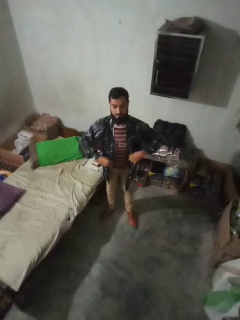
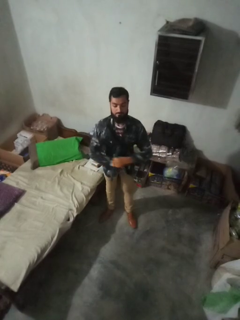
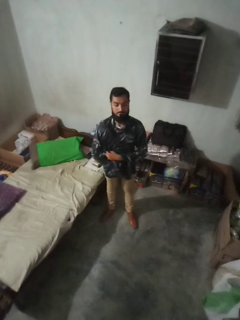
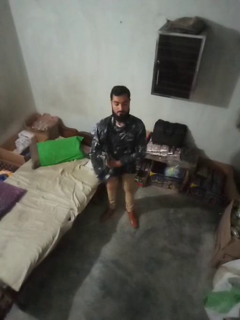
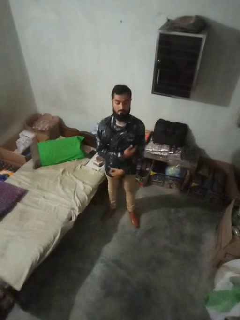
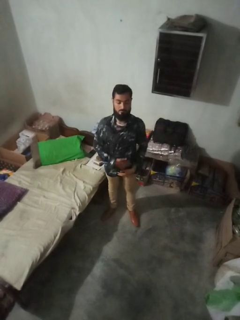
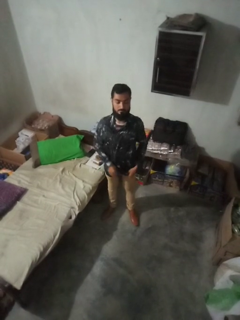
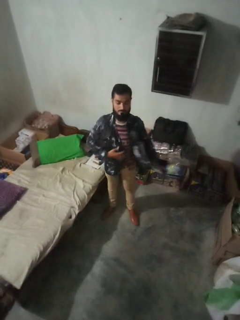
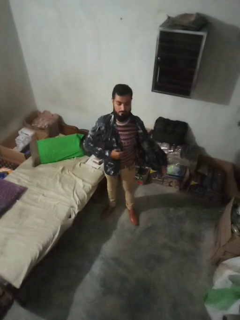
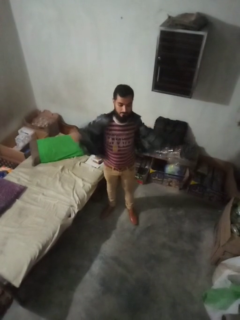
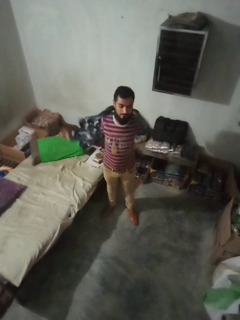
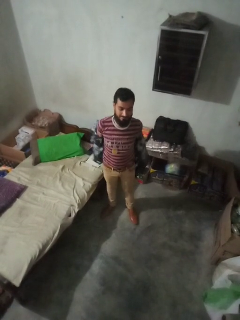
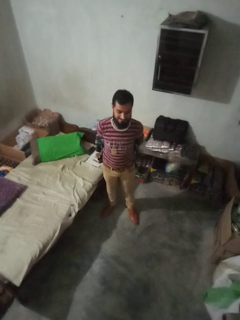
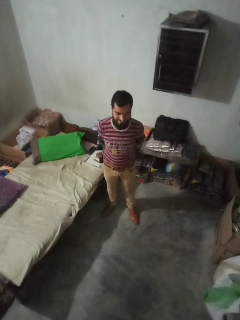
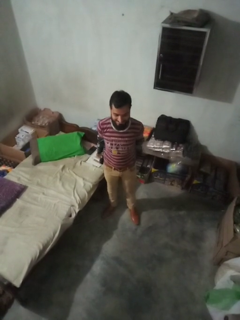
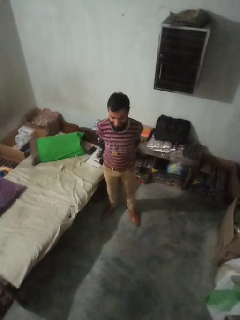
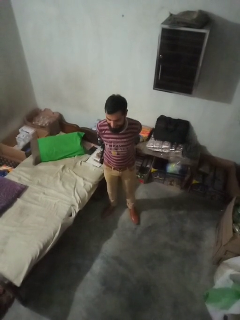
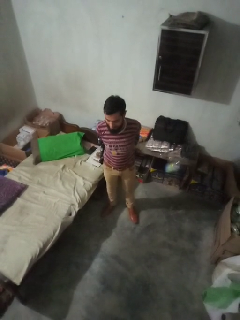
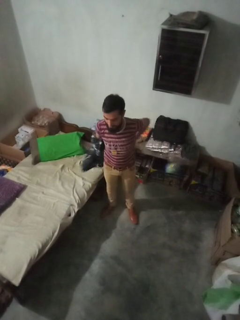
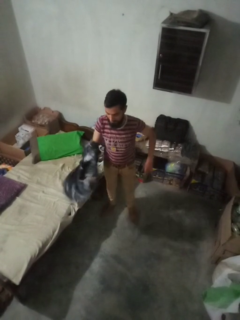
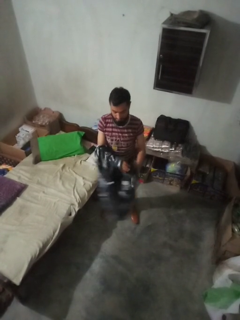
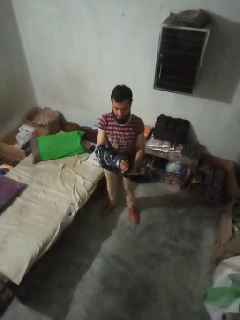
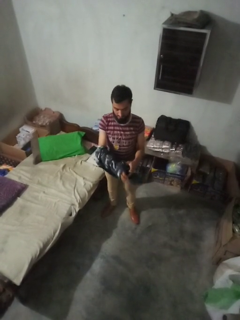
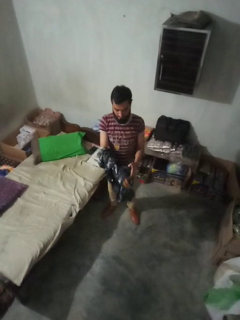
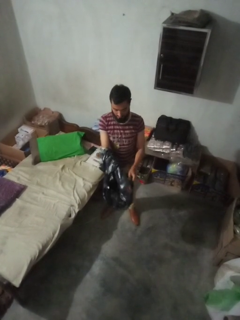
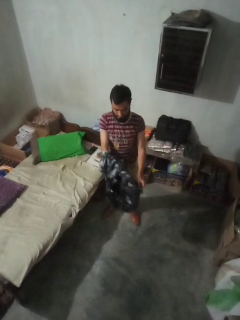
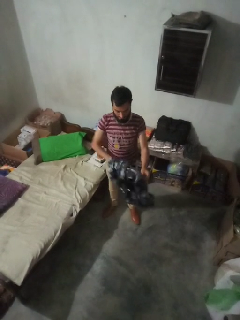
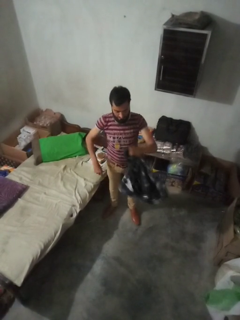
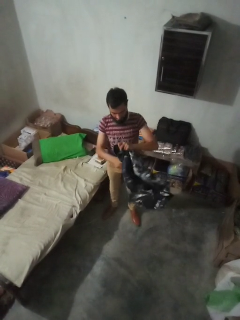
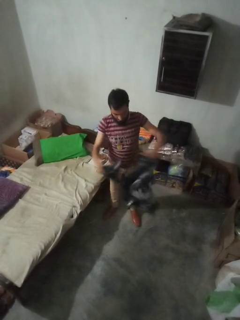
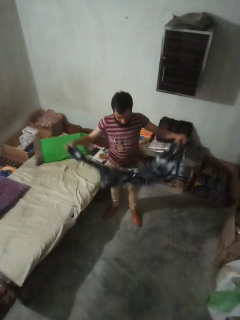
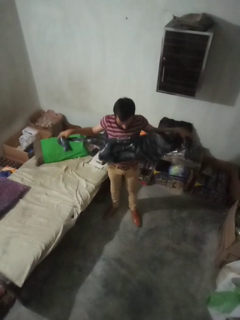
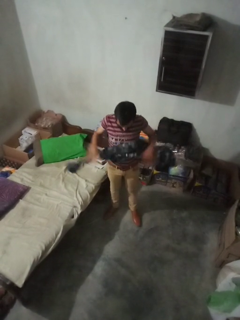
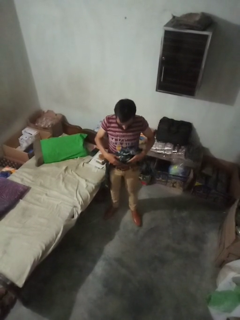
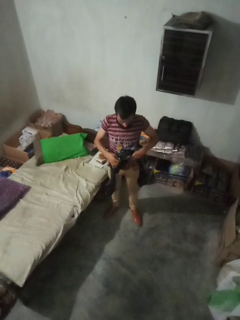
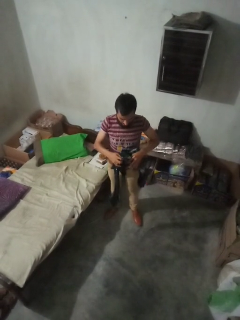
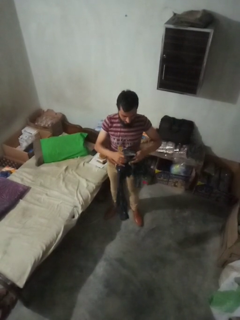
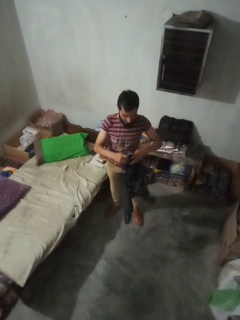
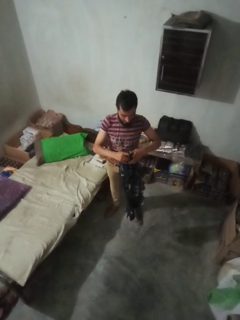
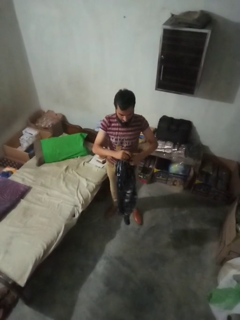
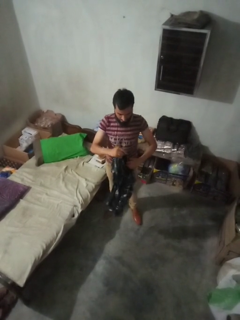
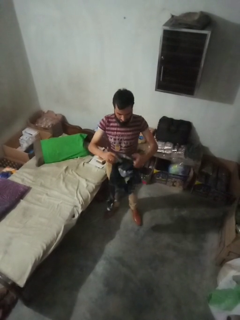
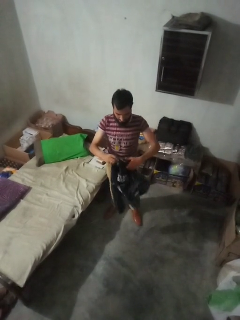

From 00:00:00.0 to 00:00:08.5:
person takes off shirt

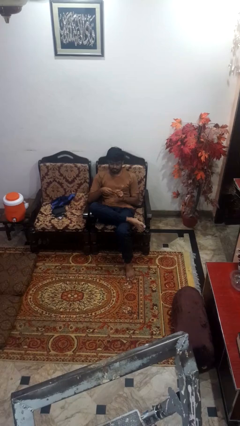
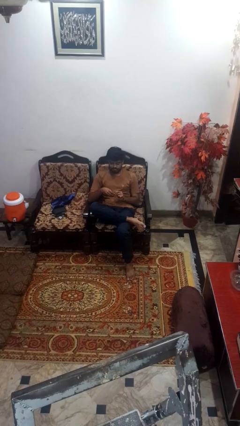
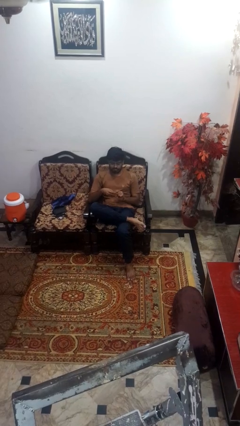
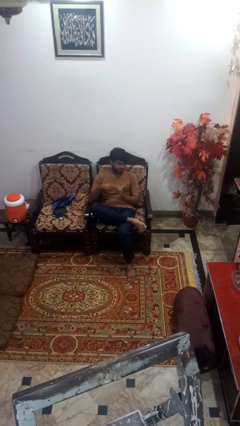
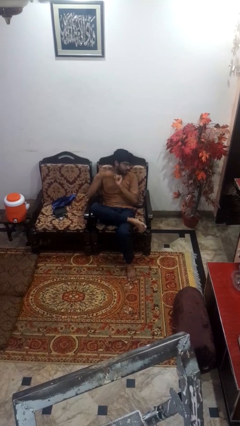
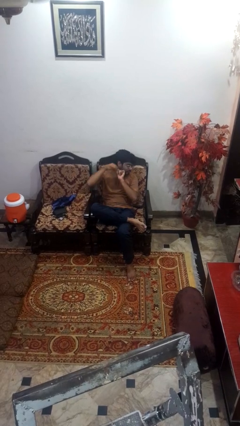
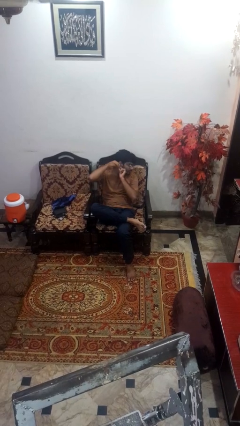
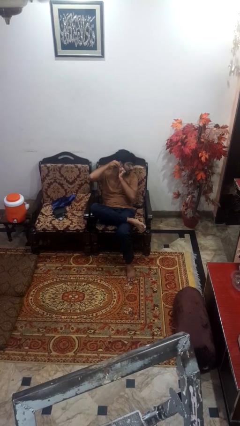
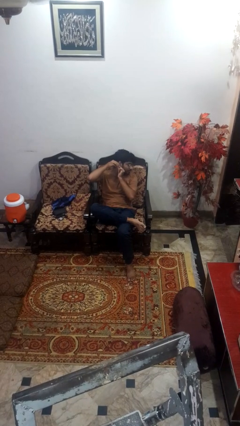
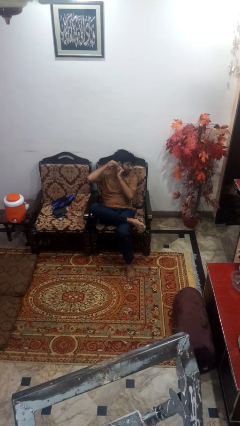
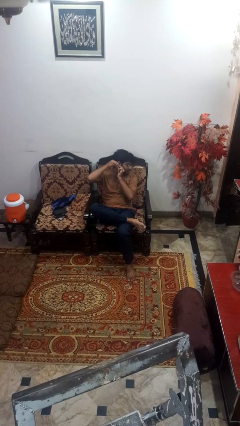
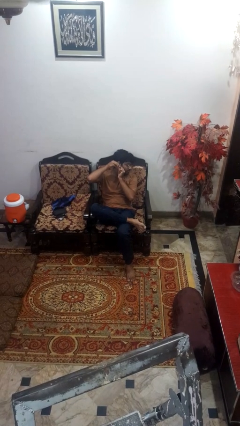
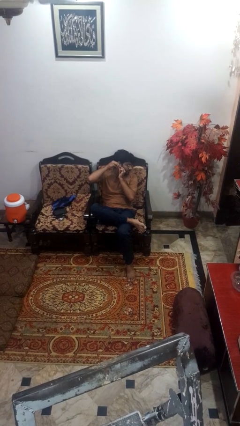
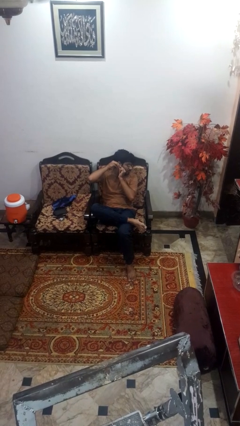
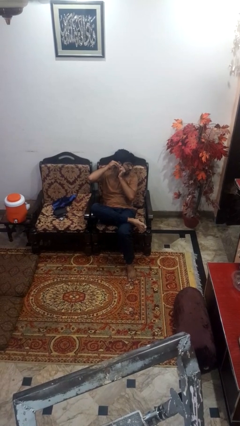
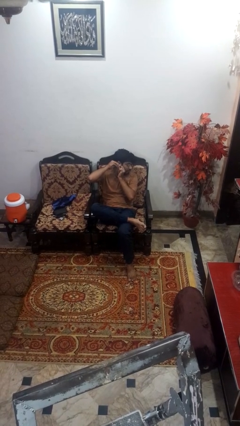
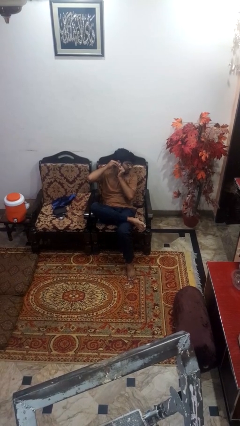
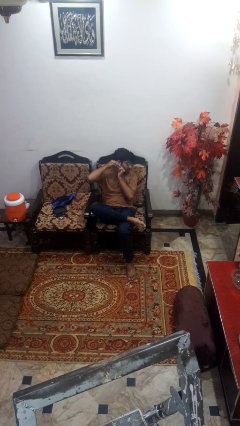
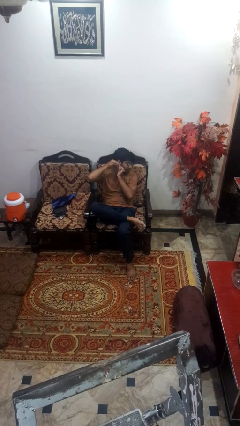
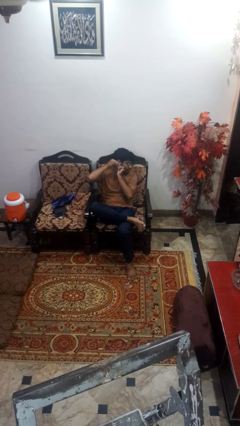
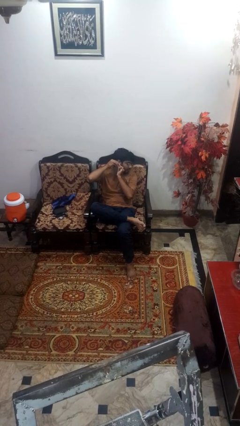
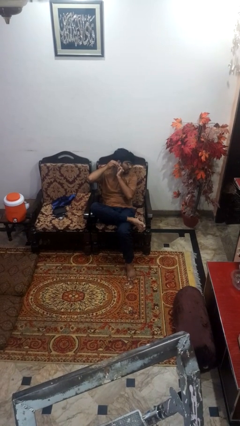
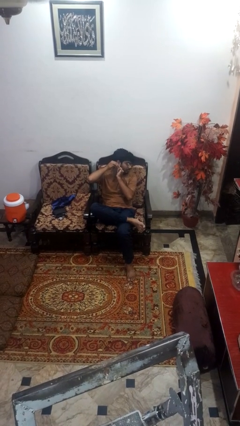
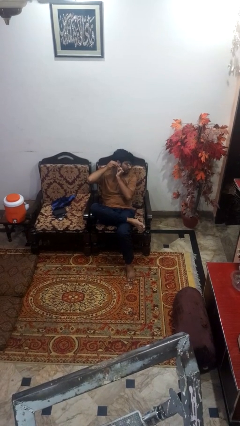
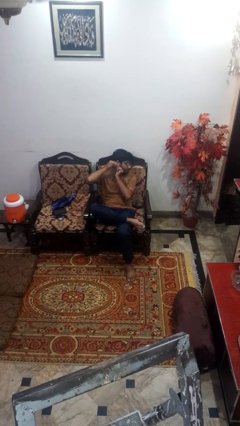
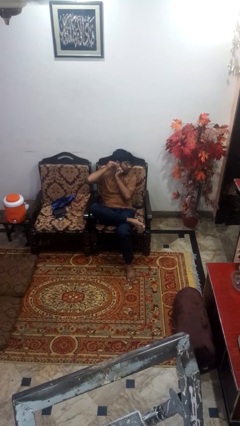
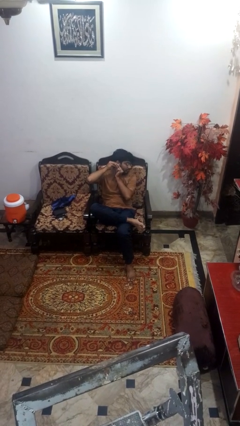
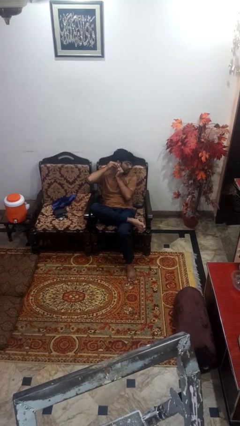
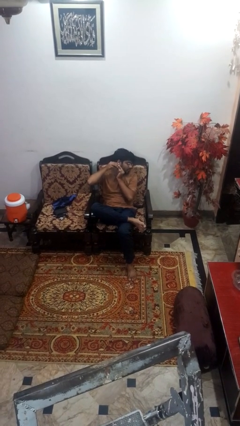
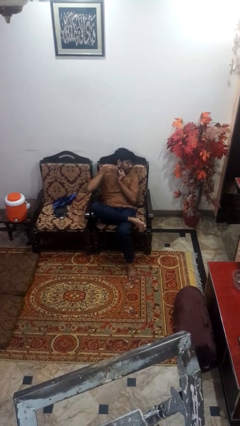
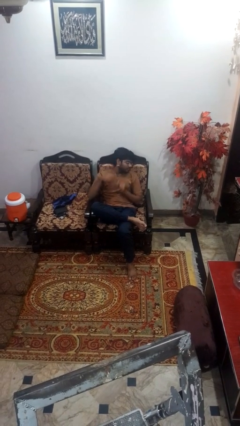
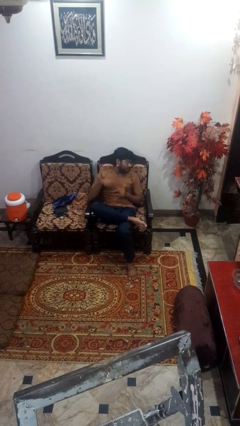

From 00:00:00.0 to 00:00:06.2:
person puts on earrings

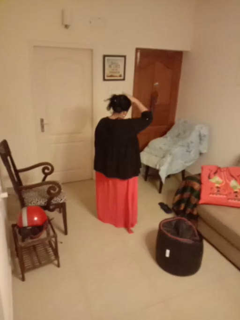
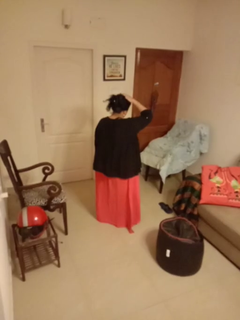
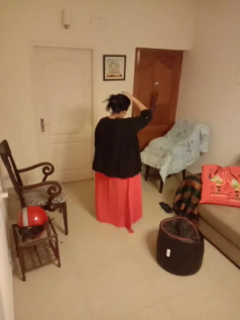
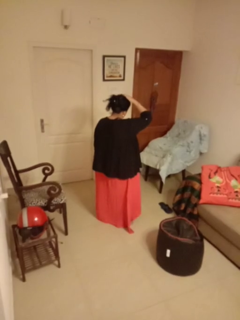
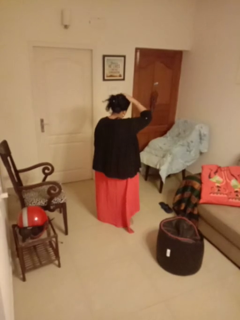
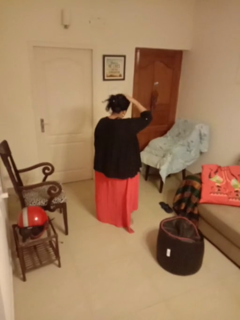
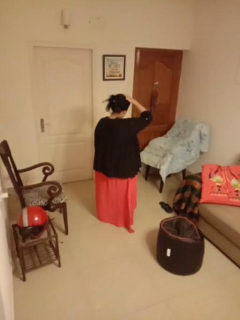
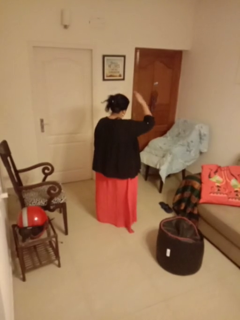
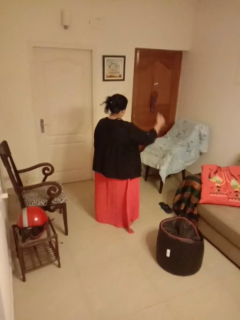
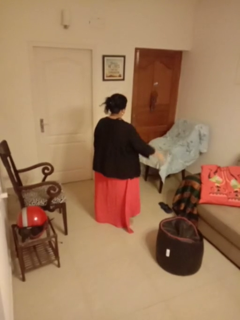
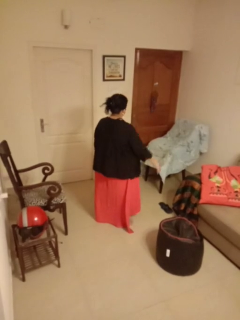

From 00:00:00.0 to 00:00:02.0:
person pats head

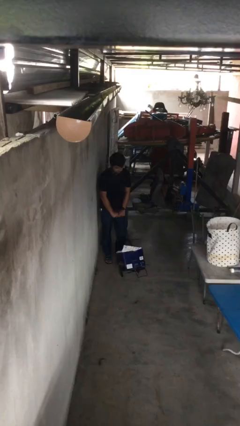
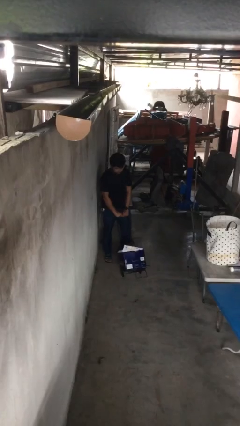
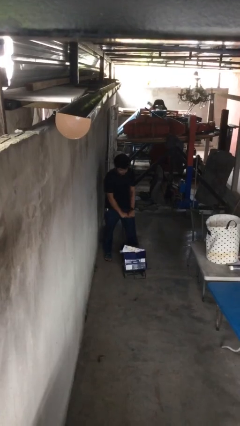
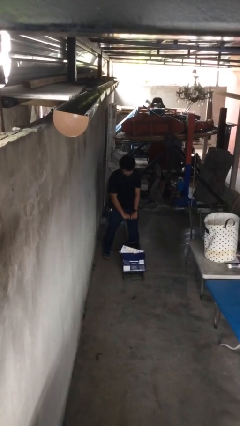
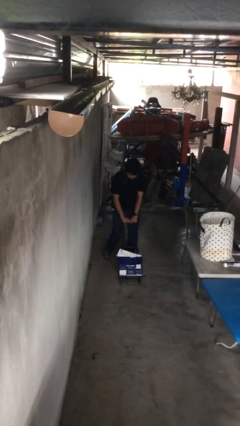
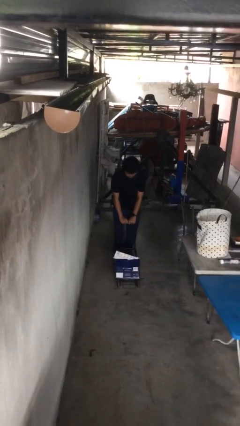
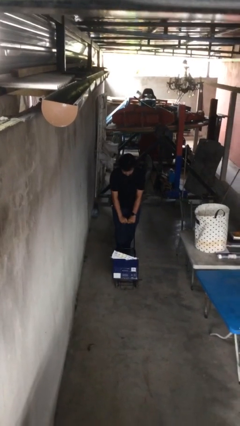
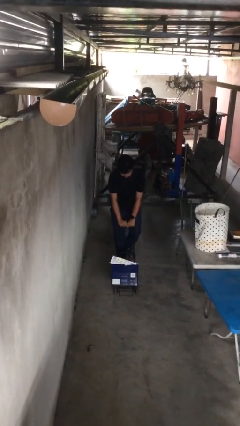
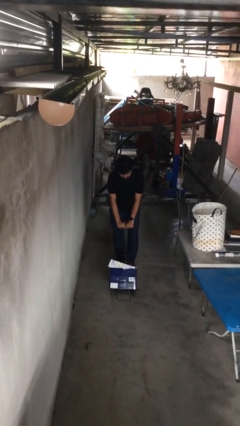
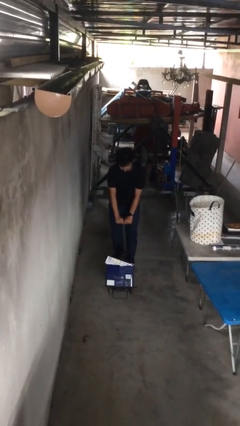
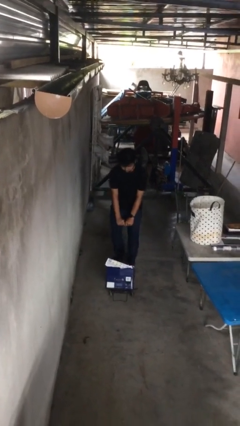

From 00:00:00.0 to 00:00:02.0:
person pushes wheeled cart

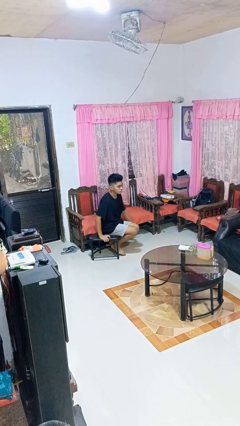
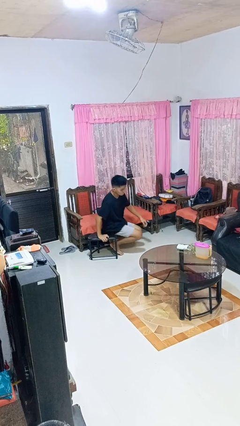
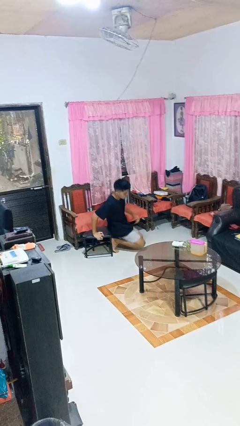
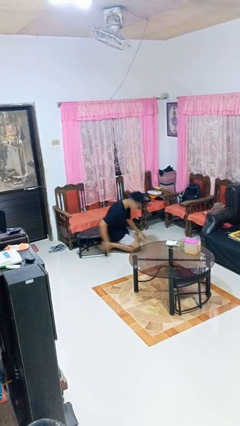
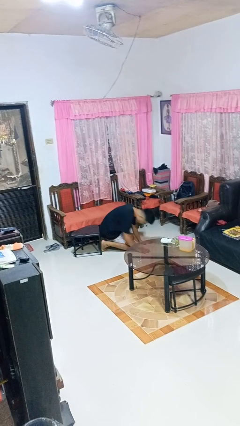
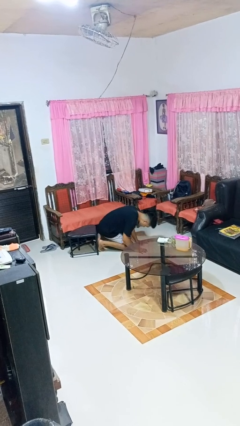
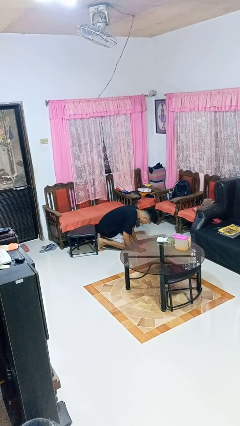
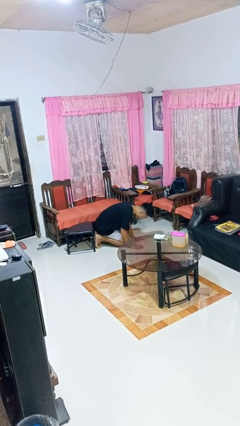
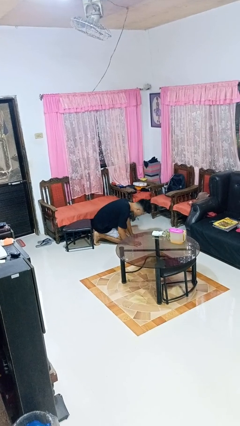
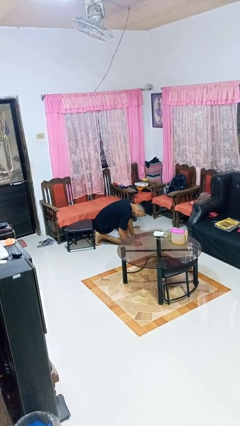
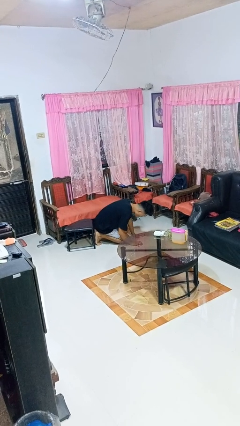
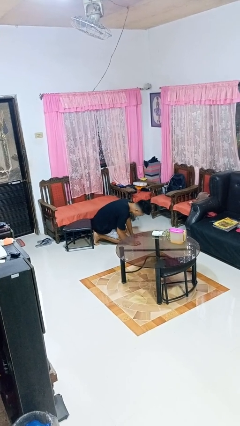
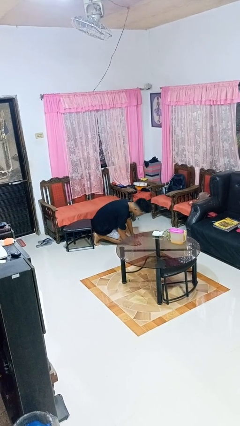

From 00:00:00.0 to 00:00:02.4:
person falls from chair
